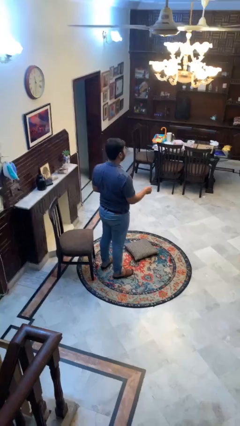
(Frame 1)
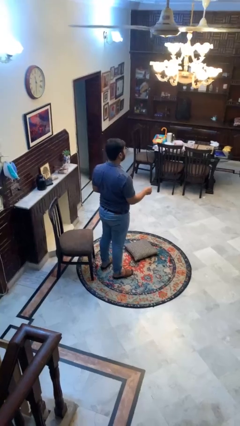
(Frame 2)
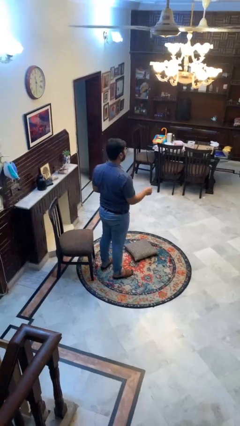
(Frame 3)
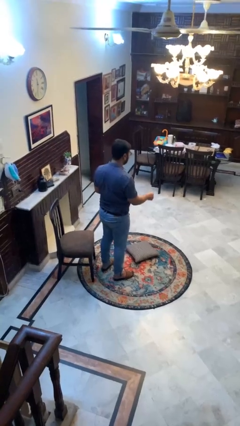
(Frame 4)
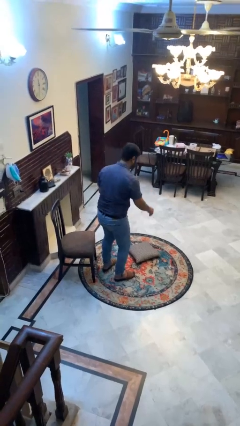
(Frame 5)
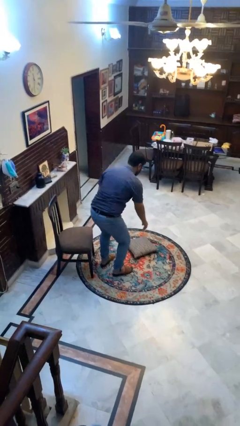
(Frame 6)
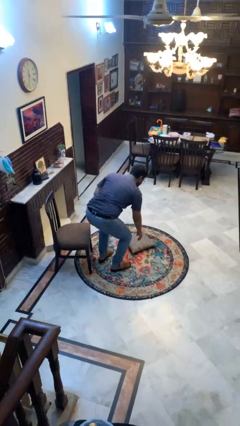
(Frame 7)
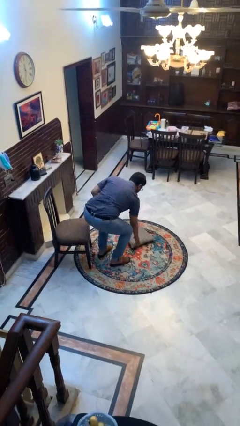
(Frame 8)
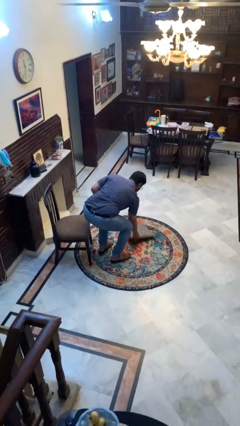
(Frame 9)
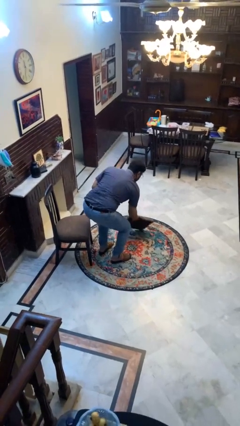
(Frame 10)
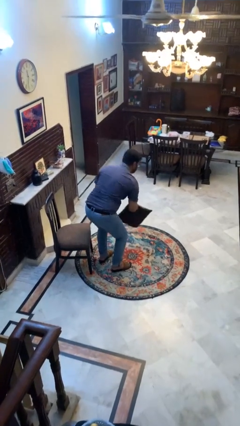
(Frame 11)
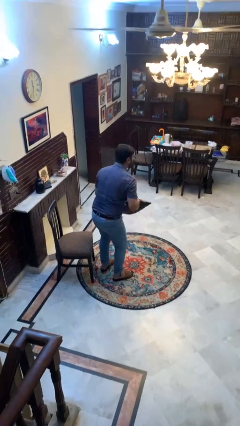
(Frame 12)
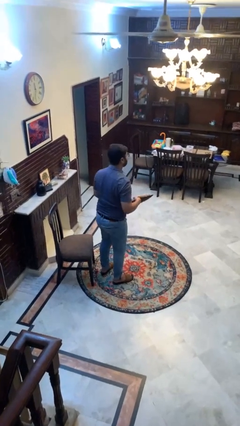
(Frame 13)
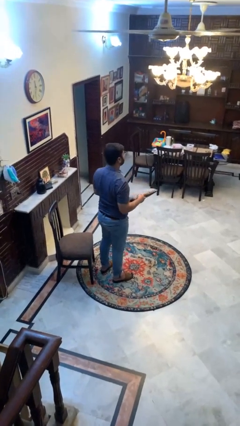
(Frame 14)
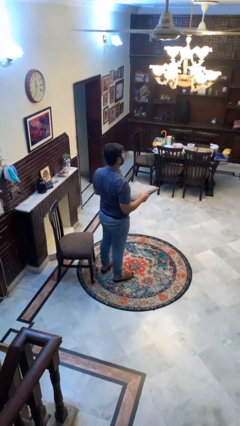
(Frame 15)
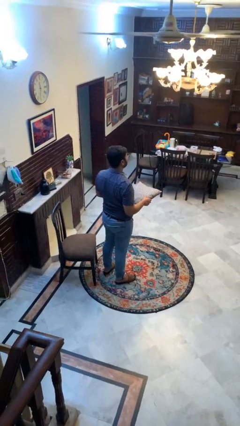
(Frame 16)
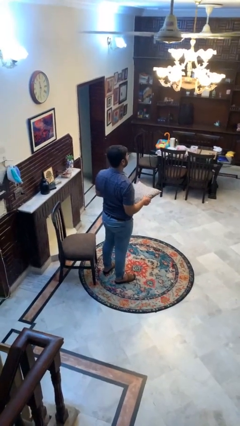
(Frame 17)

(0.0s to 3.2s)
person picks up object from floor

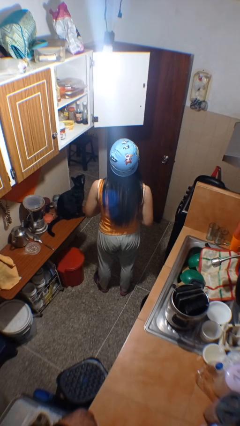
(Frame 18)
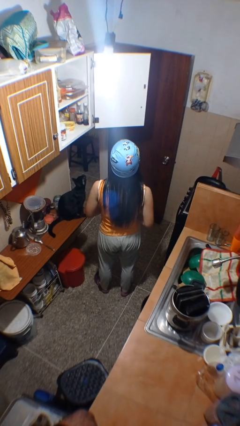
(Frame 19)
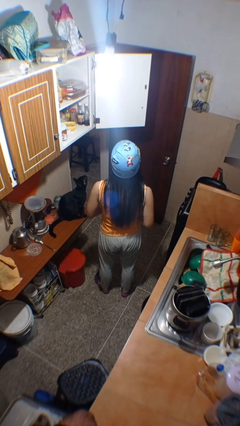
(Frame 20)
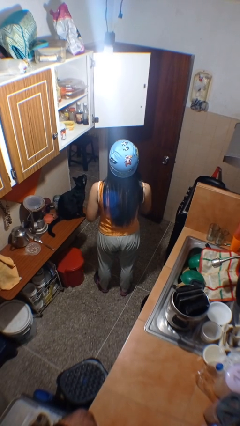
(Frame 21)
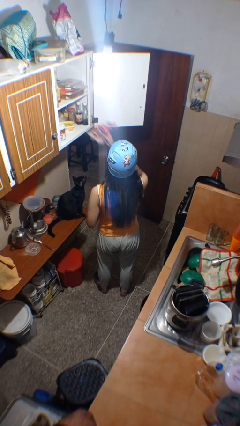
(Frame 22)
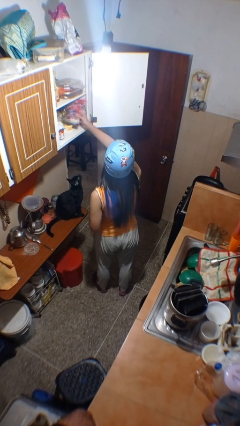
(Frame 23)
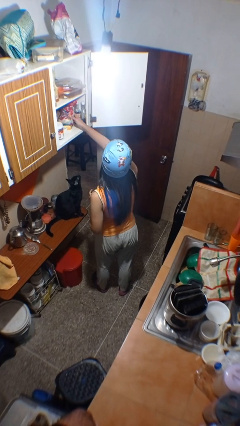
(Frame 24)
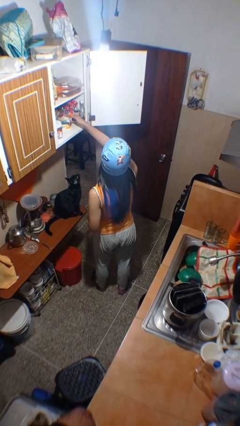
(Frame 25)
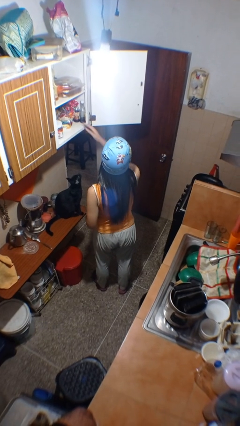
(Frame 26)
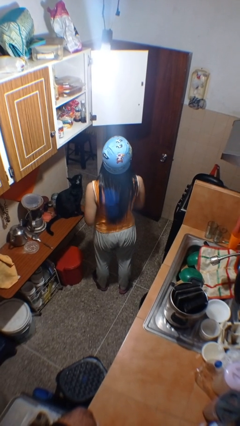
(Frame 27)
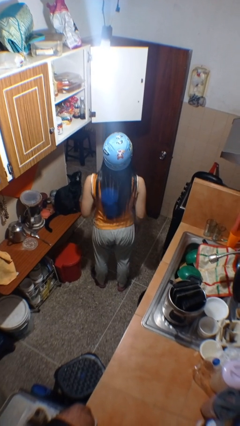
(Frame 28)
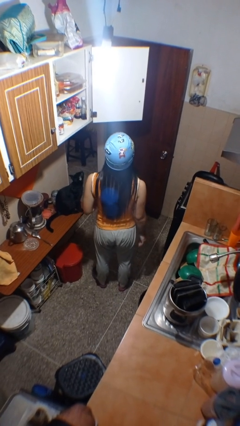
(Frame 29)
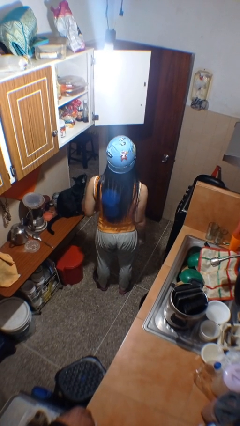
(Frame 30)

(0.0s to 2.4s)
person puts down object into cabinet

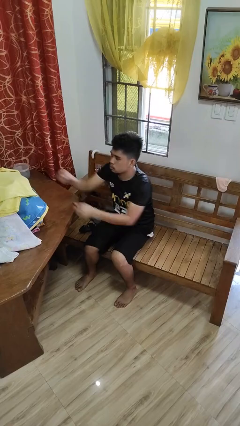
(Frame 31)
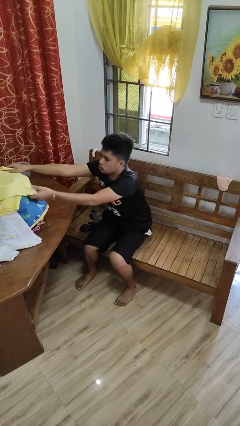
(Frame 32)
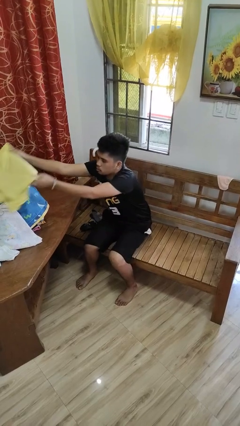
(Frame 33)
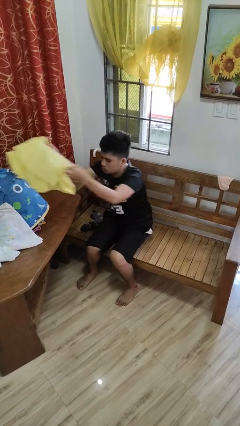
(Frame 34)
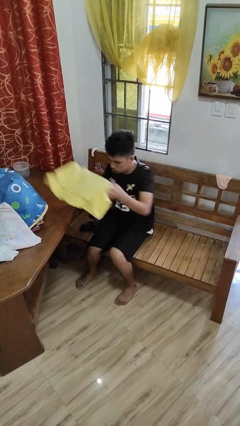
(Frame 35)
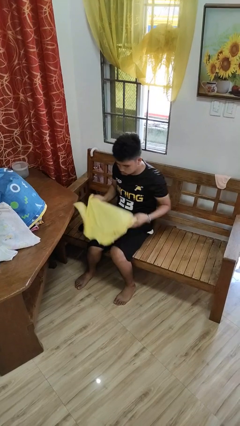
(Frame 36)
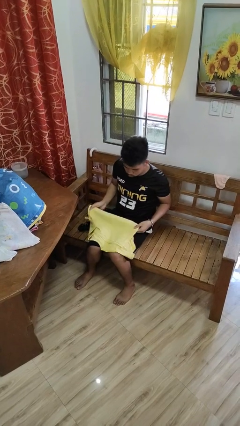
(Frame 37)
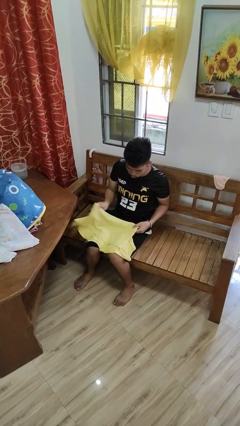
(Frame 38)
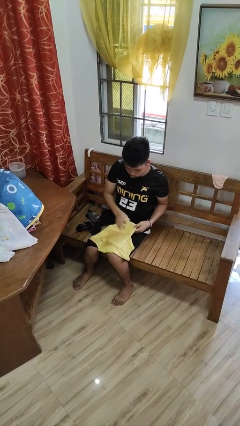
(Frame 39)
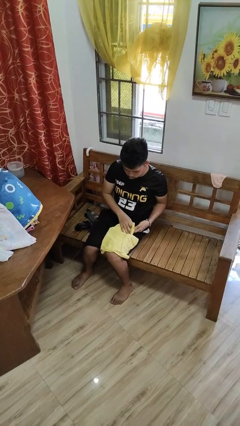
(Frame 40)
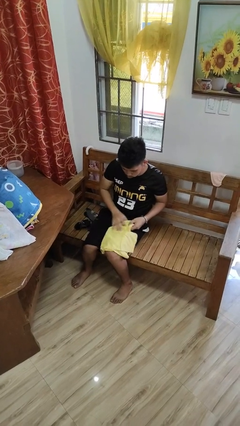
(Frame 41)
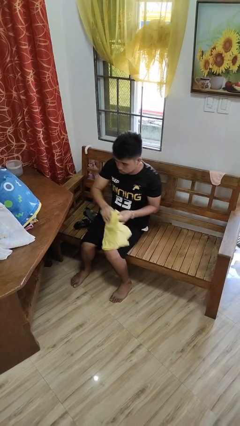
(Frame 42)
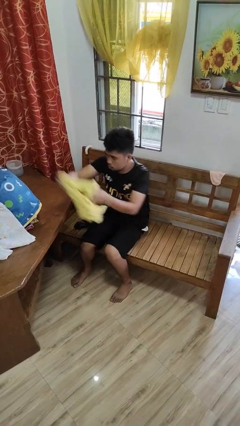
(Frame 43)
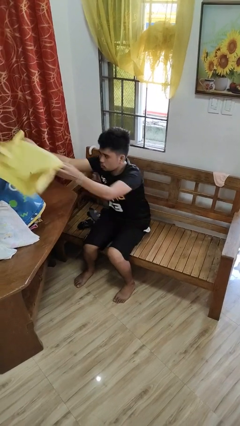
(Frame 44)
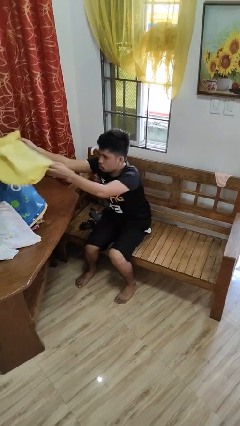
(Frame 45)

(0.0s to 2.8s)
person folds shirt

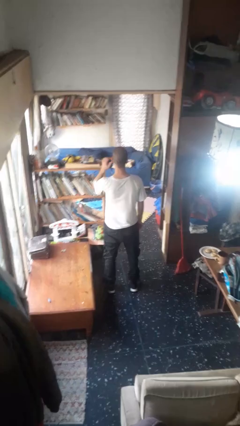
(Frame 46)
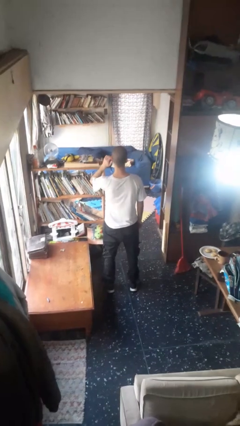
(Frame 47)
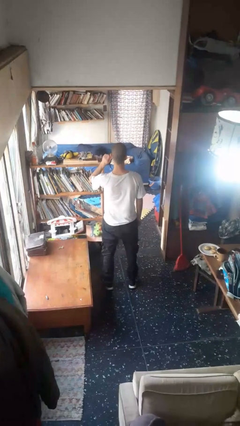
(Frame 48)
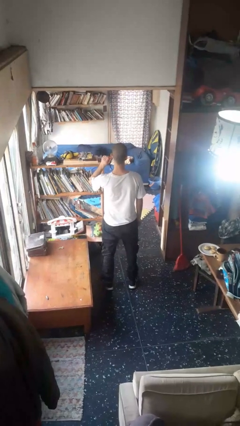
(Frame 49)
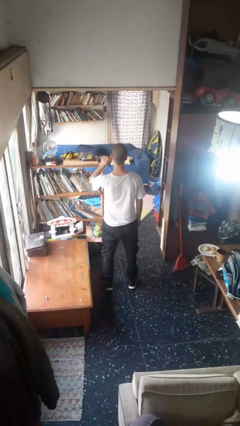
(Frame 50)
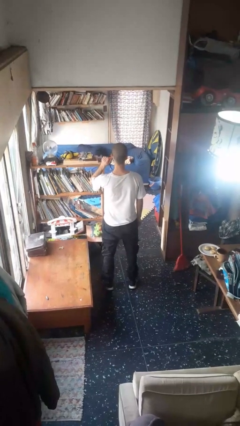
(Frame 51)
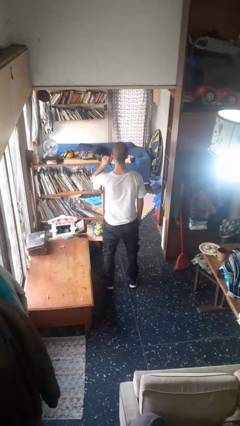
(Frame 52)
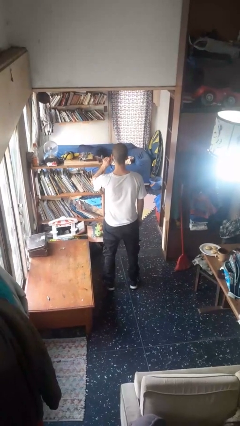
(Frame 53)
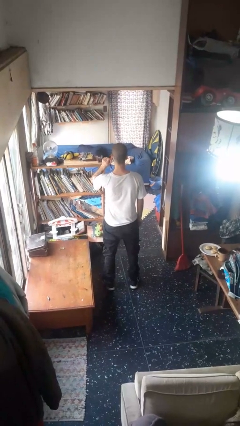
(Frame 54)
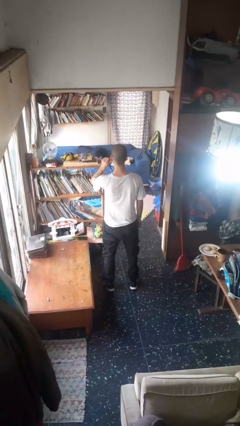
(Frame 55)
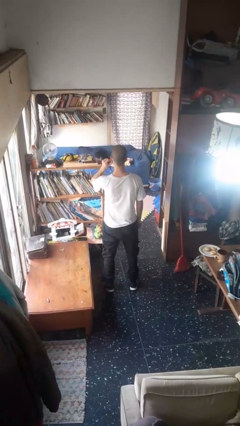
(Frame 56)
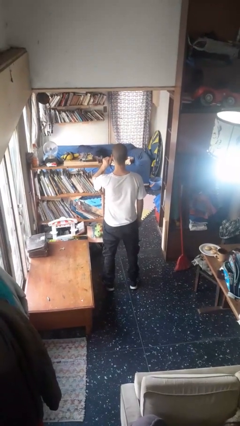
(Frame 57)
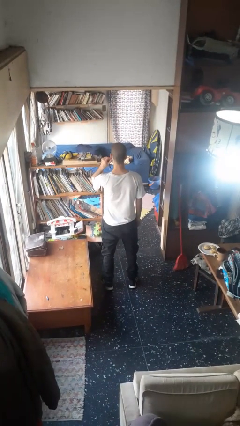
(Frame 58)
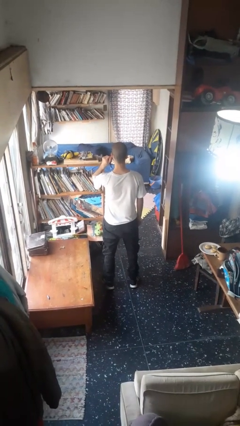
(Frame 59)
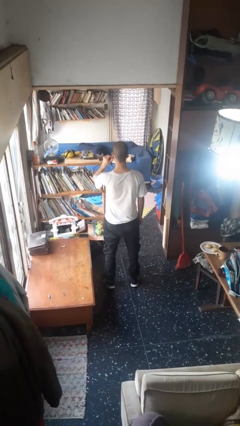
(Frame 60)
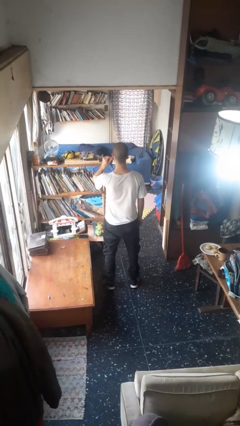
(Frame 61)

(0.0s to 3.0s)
person touches earlobe

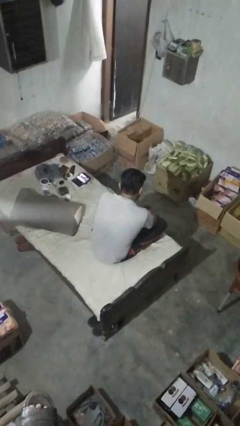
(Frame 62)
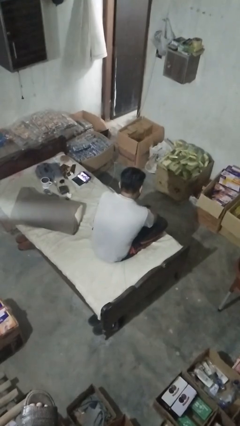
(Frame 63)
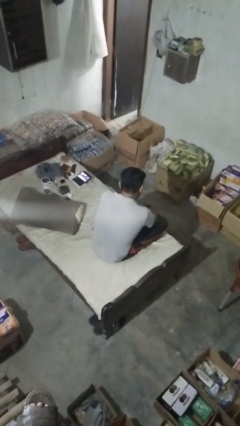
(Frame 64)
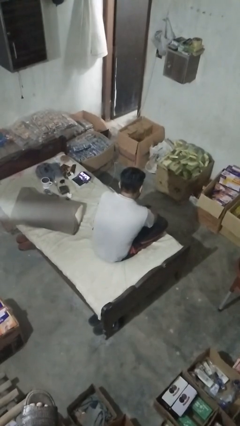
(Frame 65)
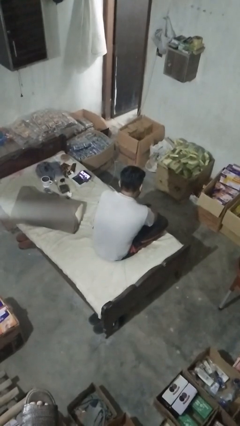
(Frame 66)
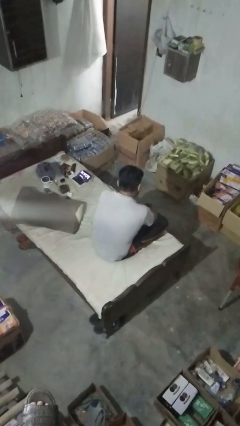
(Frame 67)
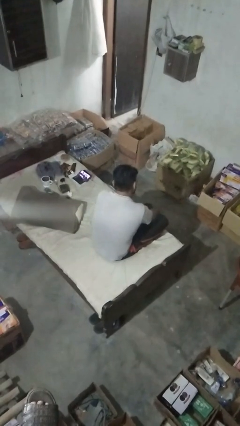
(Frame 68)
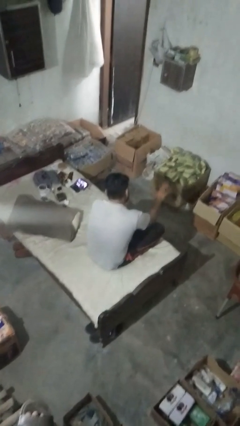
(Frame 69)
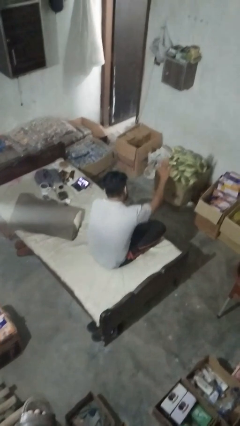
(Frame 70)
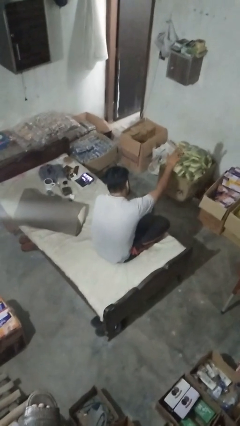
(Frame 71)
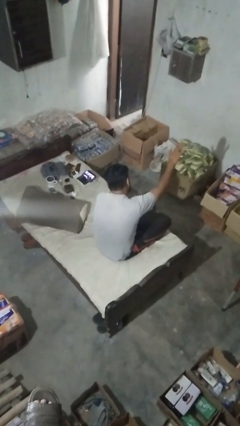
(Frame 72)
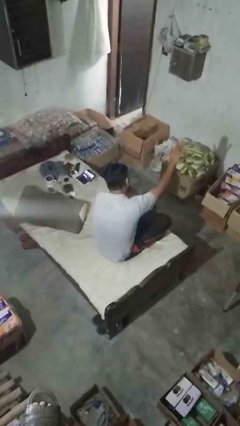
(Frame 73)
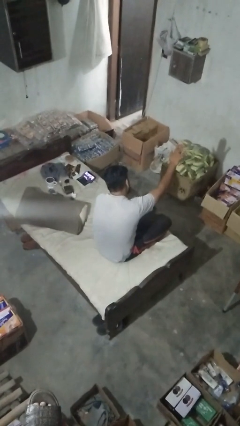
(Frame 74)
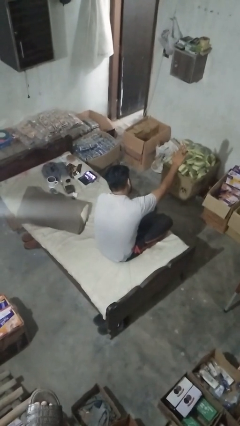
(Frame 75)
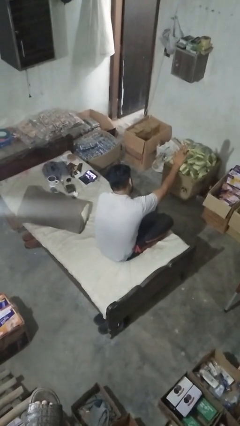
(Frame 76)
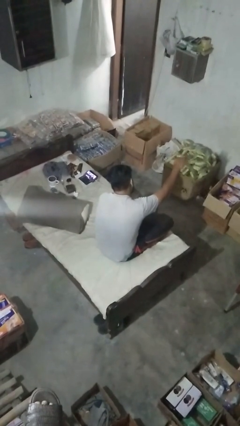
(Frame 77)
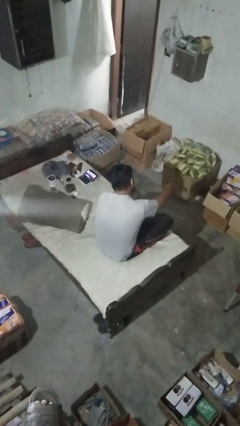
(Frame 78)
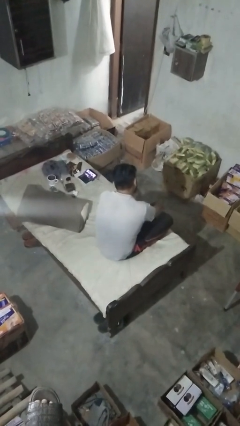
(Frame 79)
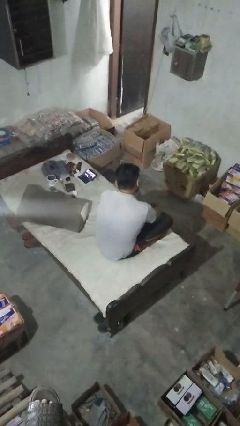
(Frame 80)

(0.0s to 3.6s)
person gestures stop

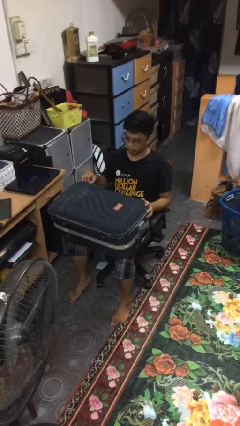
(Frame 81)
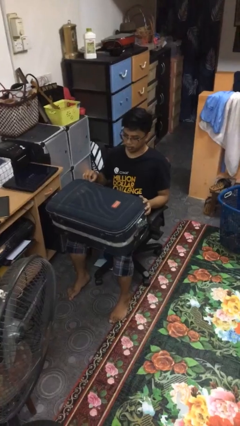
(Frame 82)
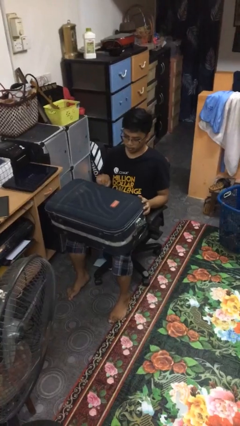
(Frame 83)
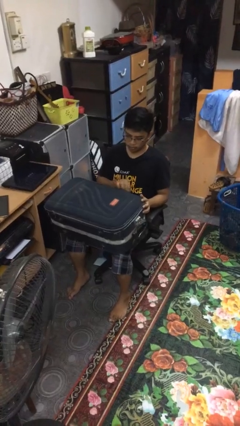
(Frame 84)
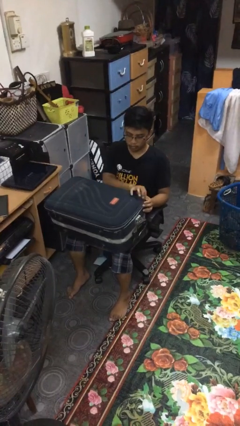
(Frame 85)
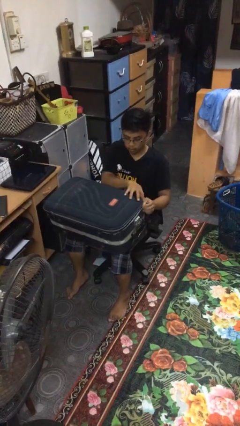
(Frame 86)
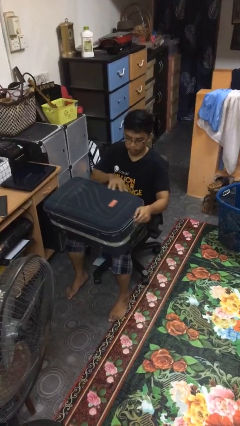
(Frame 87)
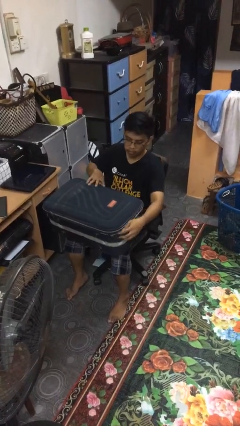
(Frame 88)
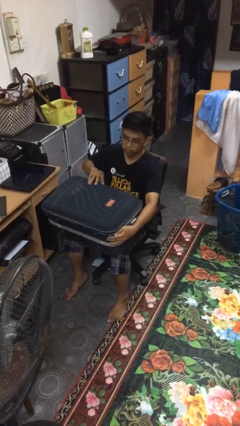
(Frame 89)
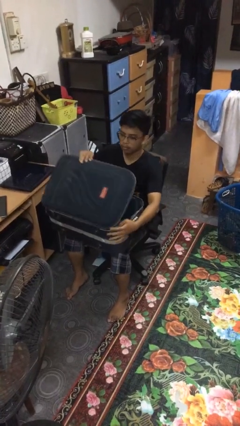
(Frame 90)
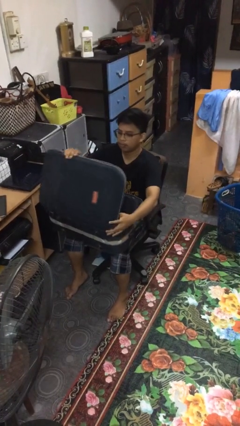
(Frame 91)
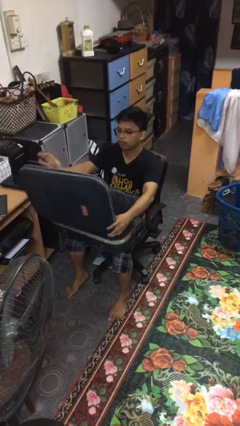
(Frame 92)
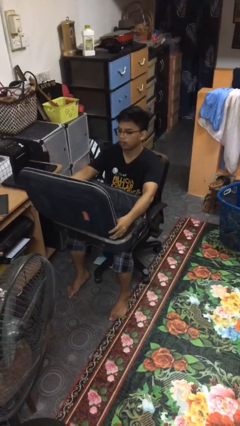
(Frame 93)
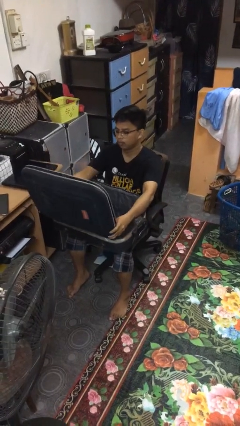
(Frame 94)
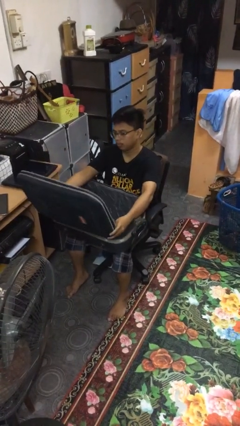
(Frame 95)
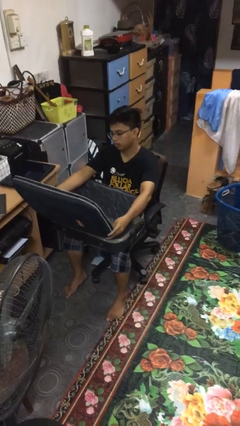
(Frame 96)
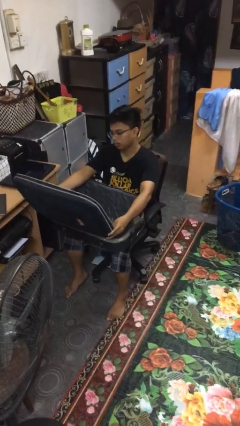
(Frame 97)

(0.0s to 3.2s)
person opens suitcase
